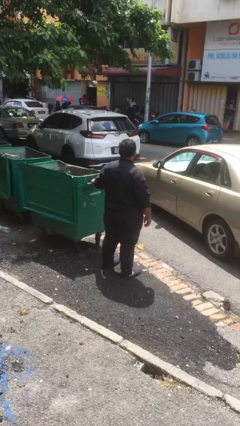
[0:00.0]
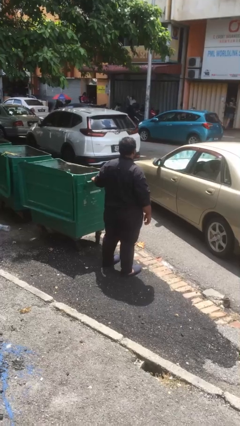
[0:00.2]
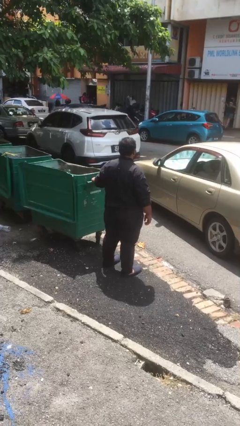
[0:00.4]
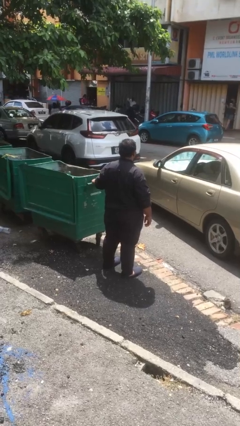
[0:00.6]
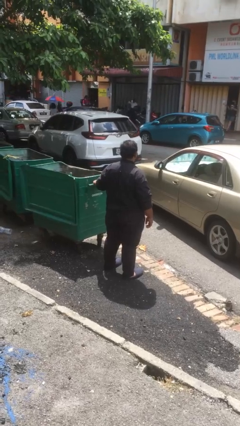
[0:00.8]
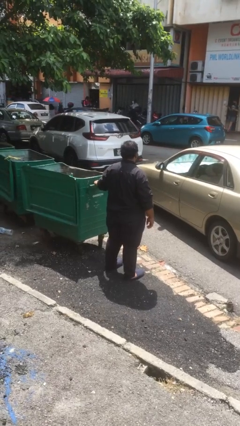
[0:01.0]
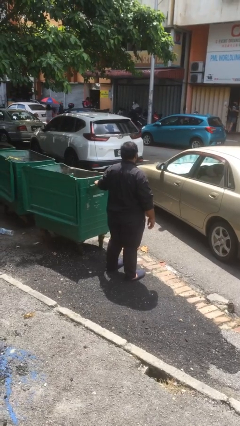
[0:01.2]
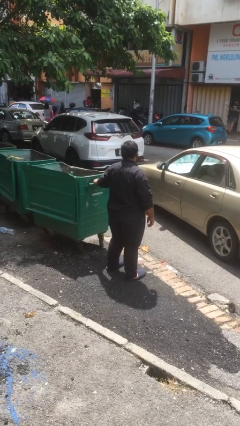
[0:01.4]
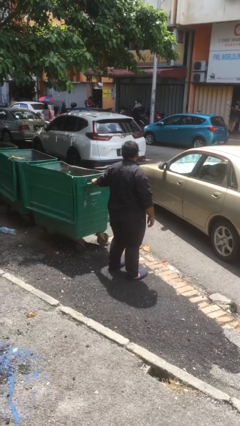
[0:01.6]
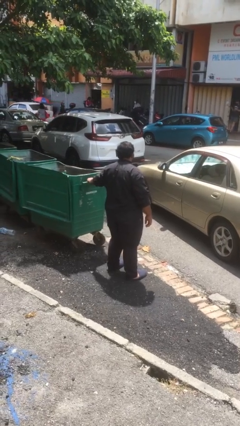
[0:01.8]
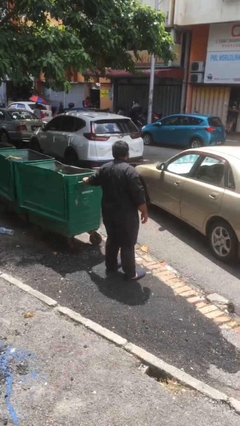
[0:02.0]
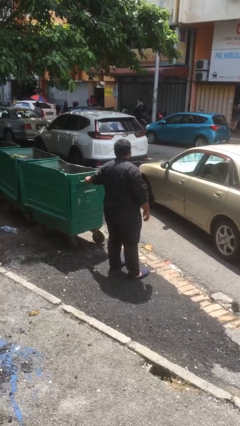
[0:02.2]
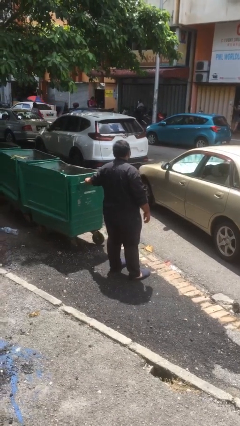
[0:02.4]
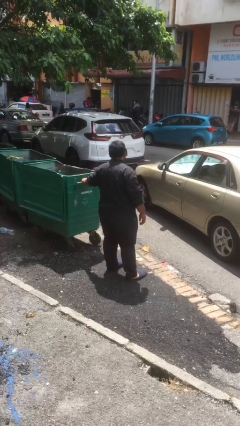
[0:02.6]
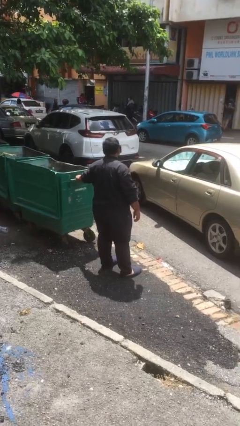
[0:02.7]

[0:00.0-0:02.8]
person pushes wheeled trashcan

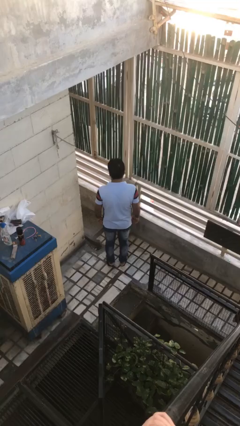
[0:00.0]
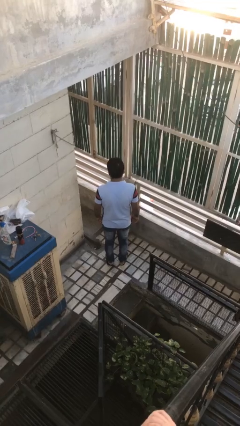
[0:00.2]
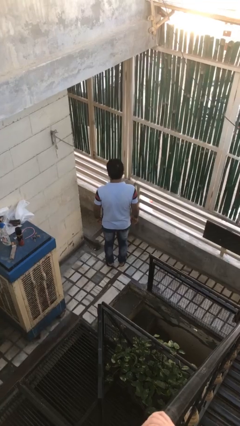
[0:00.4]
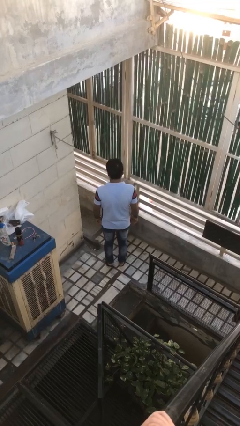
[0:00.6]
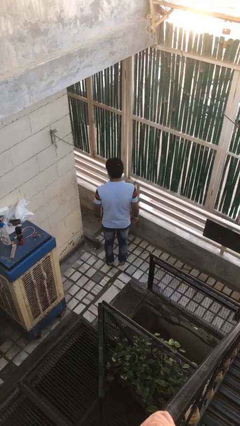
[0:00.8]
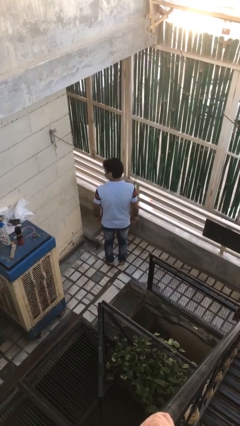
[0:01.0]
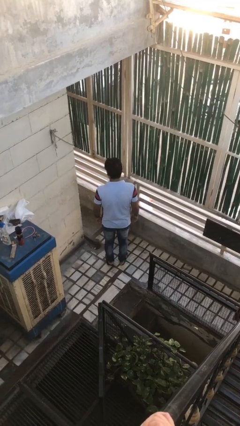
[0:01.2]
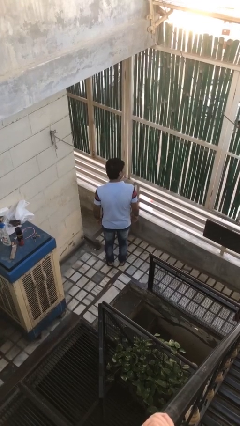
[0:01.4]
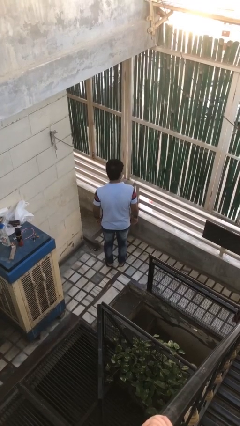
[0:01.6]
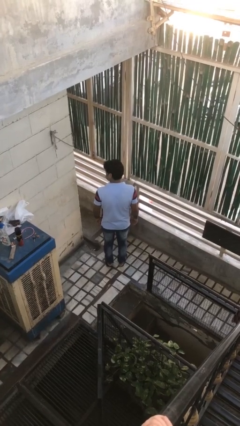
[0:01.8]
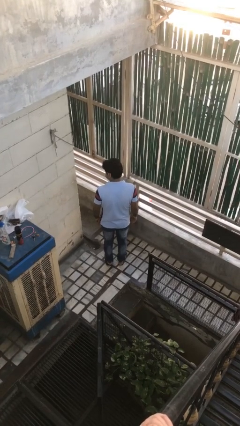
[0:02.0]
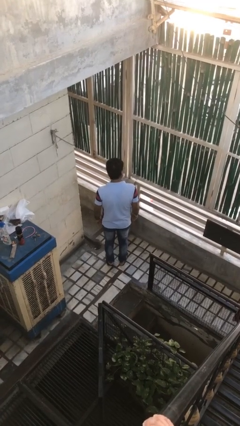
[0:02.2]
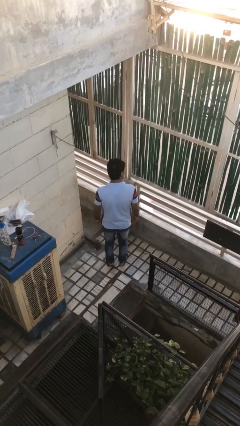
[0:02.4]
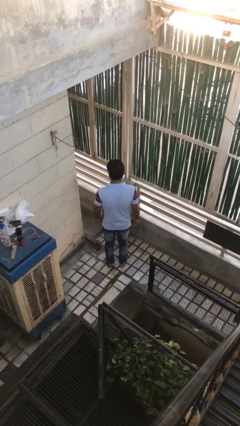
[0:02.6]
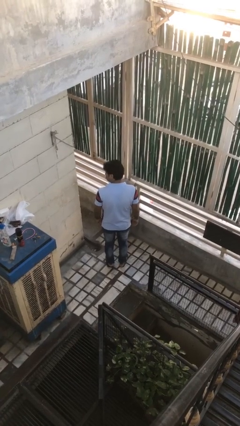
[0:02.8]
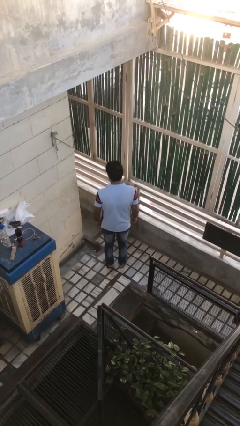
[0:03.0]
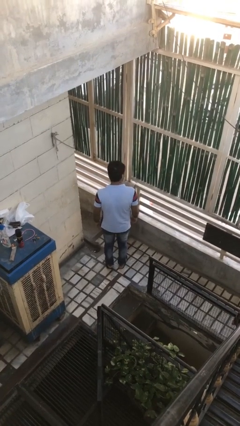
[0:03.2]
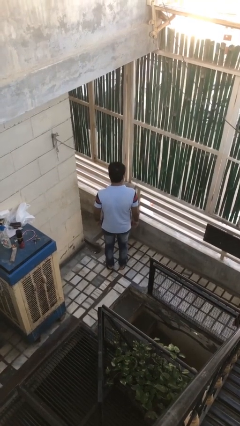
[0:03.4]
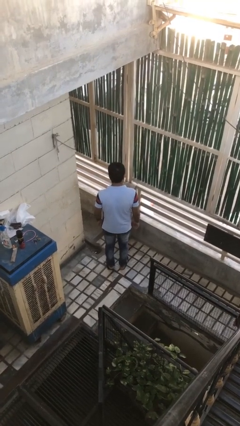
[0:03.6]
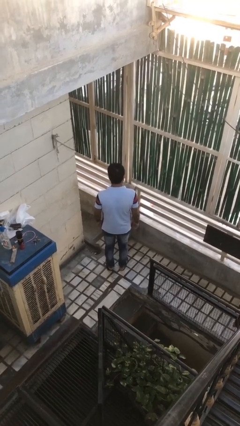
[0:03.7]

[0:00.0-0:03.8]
person shakes head

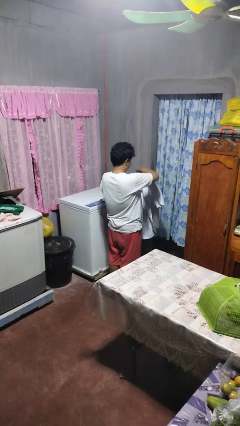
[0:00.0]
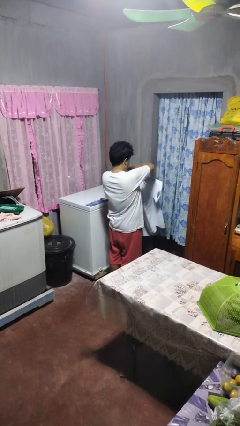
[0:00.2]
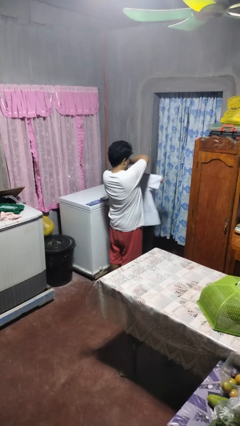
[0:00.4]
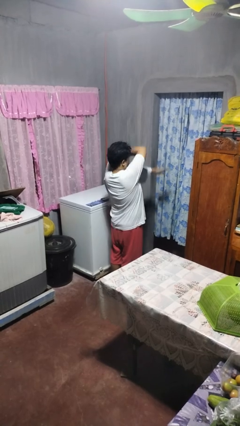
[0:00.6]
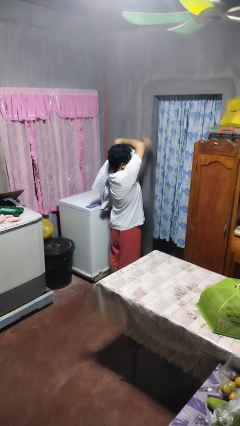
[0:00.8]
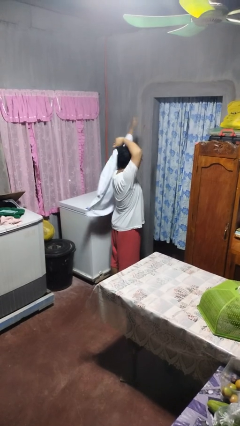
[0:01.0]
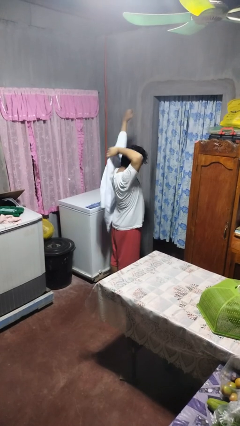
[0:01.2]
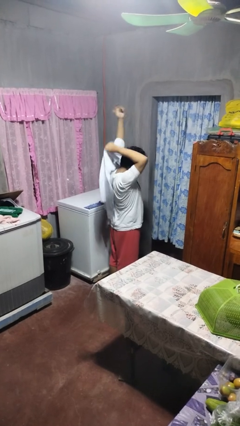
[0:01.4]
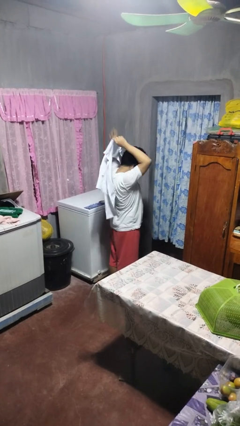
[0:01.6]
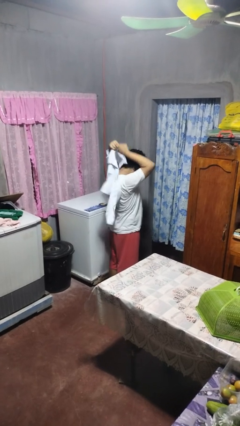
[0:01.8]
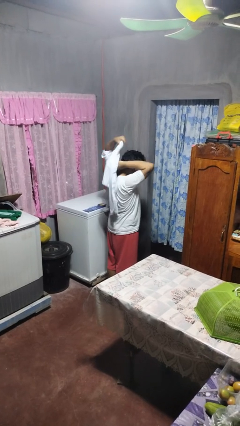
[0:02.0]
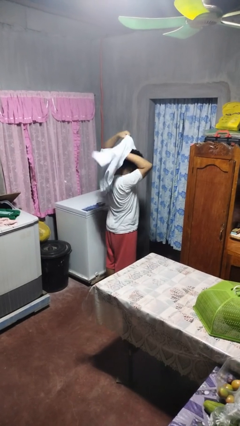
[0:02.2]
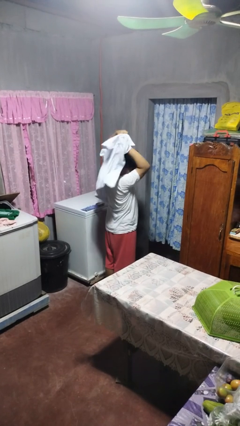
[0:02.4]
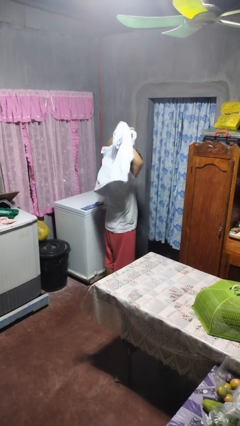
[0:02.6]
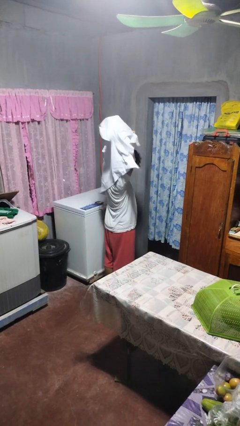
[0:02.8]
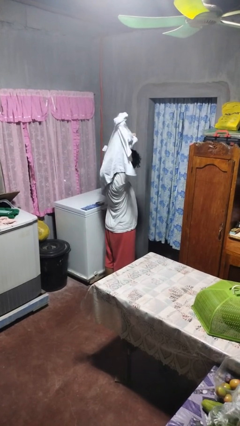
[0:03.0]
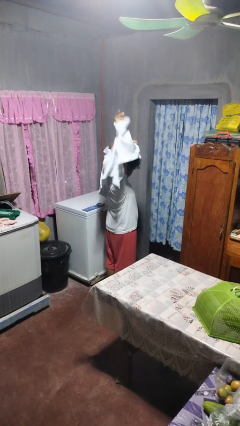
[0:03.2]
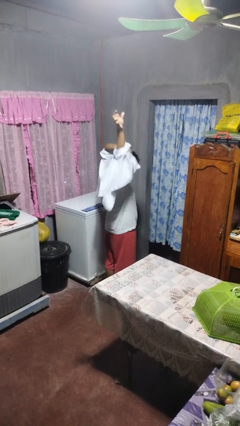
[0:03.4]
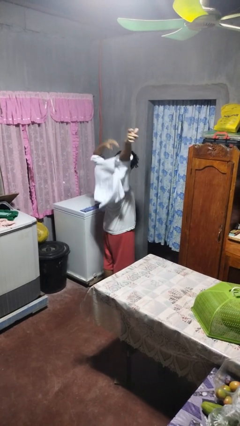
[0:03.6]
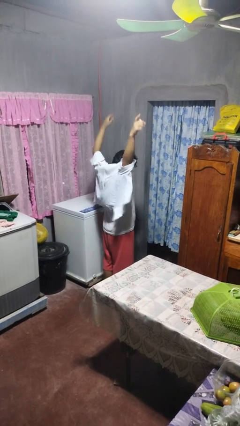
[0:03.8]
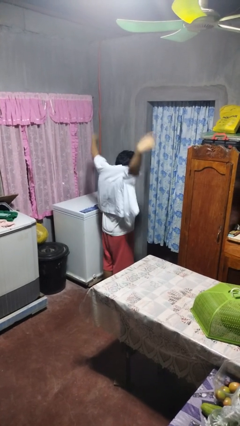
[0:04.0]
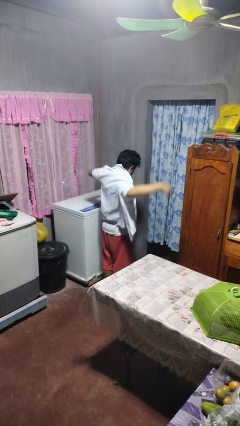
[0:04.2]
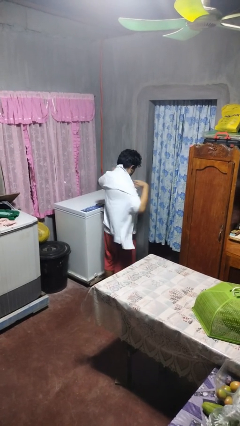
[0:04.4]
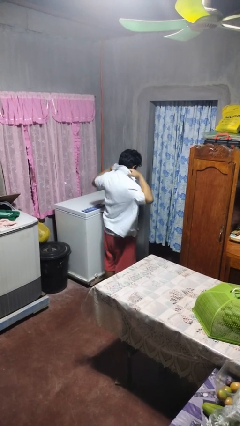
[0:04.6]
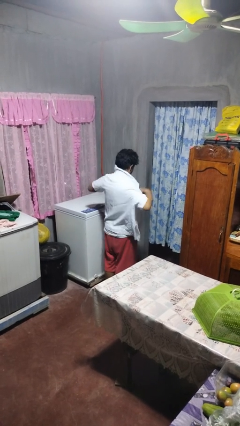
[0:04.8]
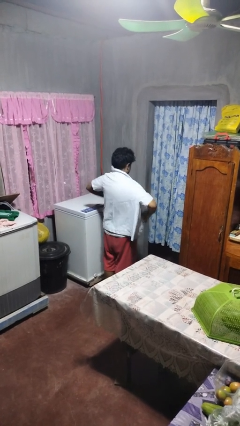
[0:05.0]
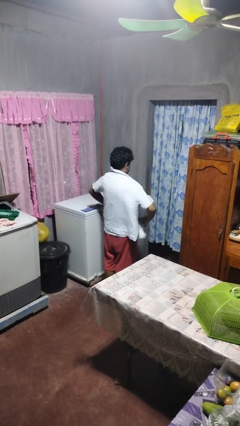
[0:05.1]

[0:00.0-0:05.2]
person puts on shirt

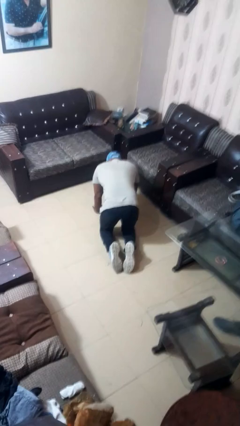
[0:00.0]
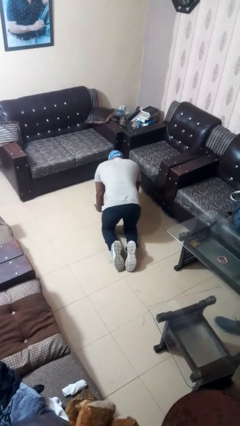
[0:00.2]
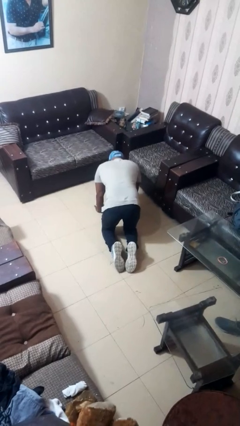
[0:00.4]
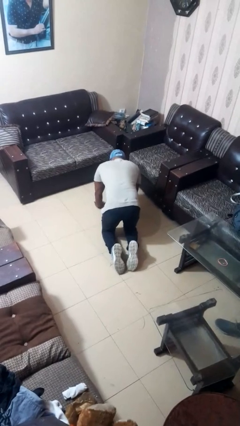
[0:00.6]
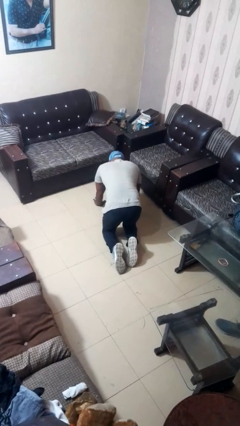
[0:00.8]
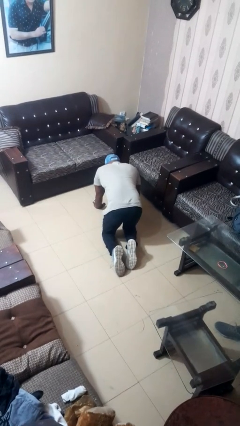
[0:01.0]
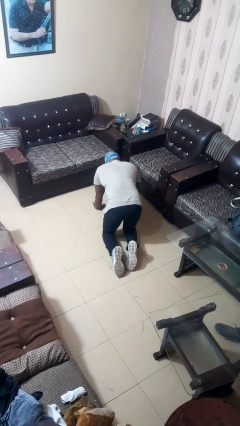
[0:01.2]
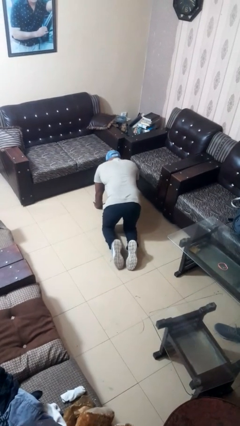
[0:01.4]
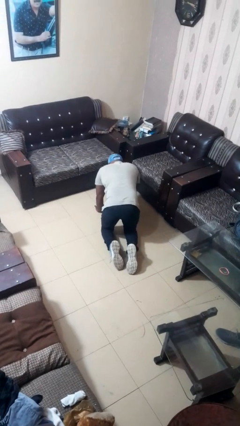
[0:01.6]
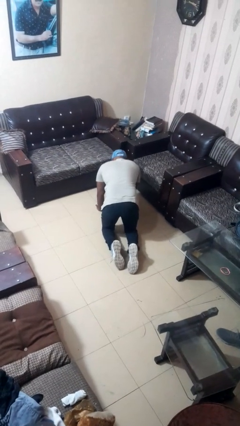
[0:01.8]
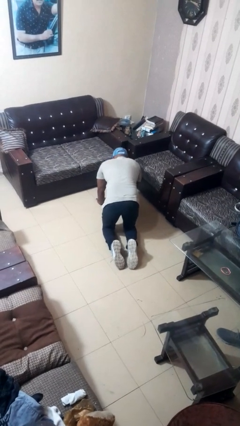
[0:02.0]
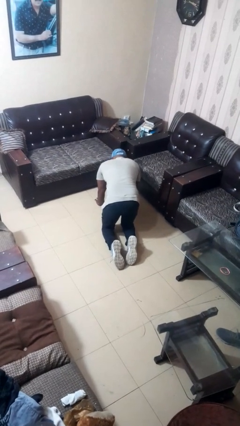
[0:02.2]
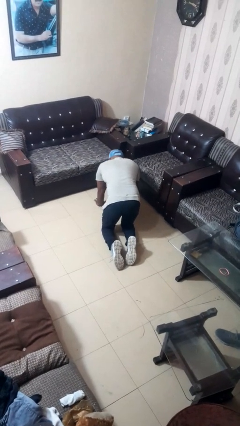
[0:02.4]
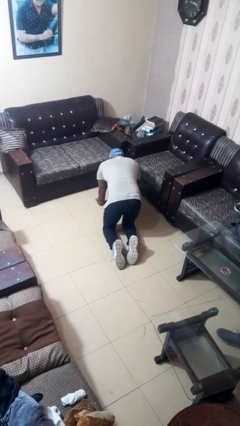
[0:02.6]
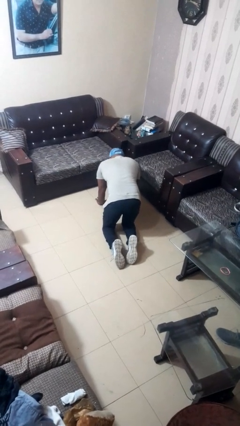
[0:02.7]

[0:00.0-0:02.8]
person crawls

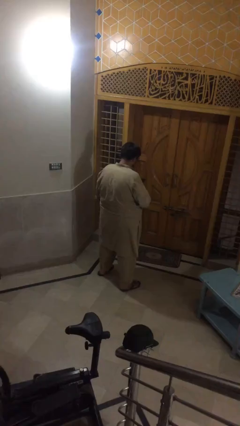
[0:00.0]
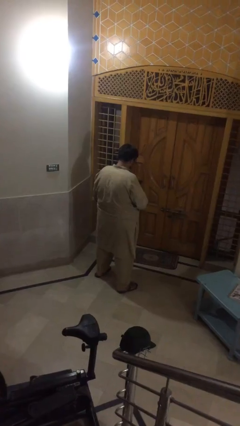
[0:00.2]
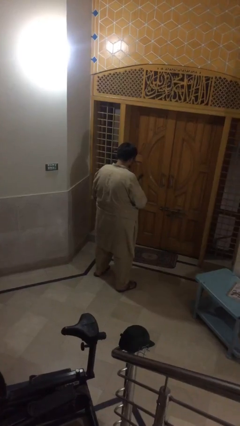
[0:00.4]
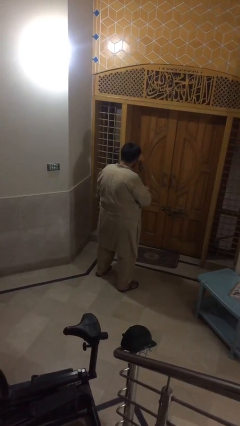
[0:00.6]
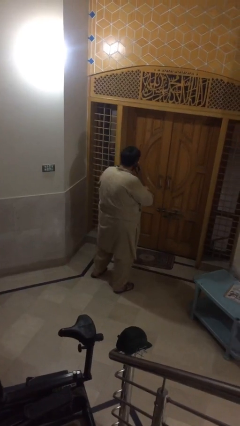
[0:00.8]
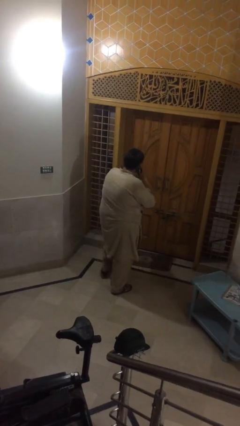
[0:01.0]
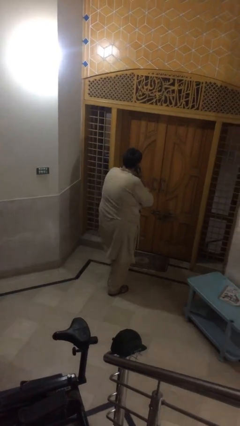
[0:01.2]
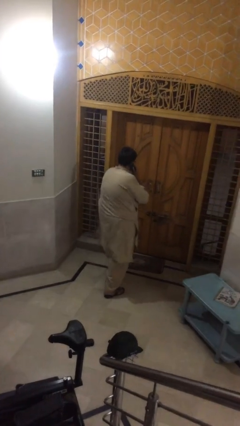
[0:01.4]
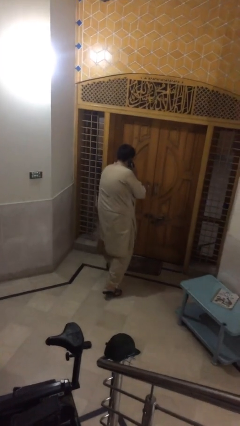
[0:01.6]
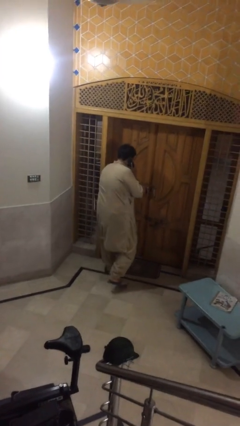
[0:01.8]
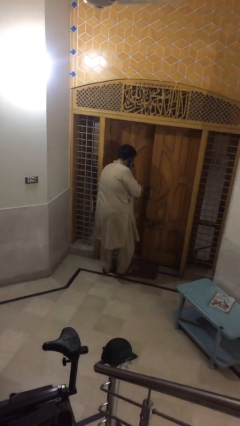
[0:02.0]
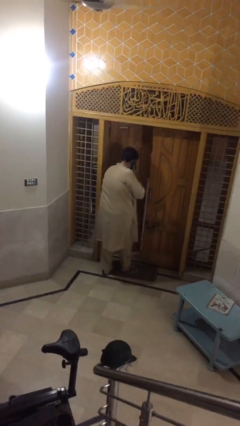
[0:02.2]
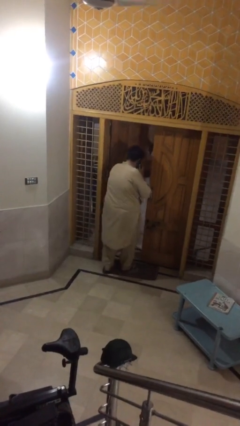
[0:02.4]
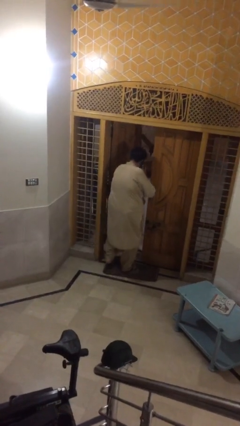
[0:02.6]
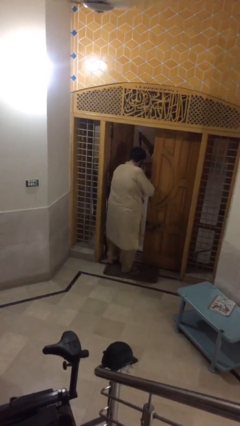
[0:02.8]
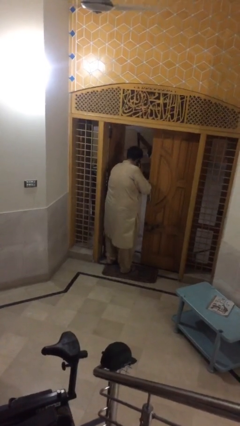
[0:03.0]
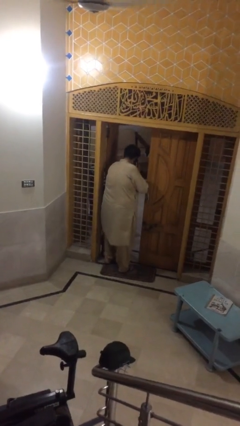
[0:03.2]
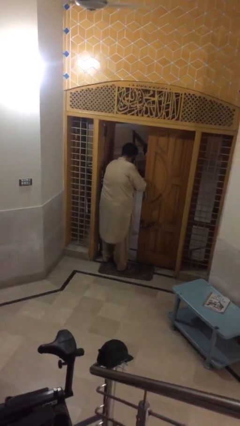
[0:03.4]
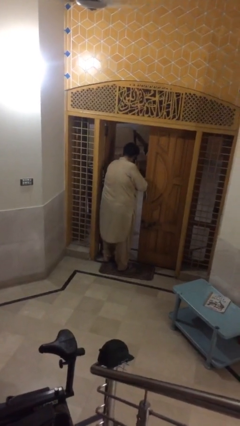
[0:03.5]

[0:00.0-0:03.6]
person opens facility door
